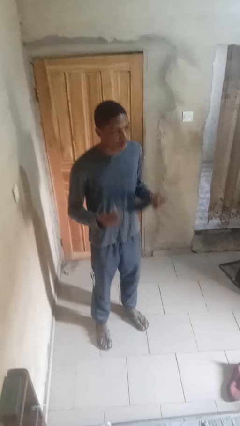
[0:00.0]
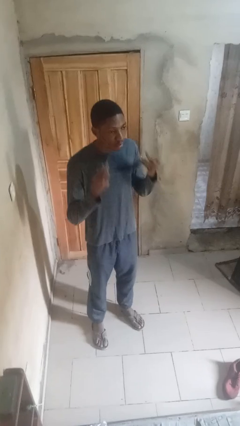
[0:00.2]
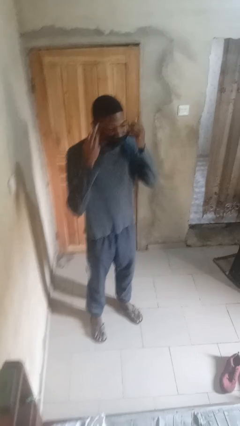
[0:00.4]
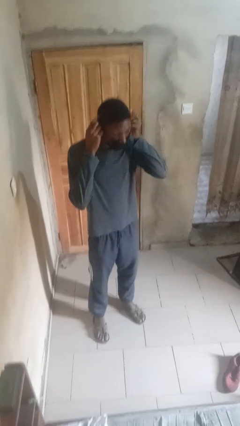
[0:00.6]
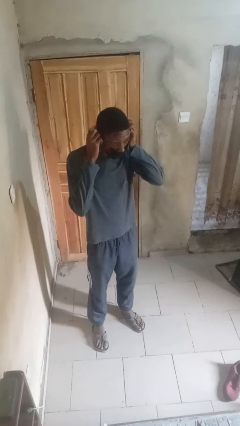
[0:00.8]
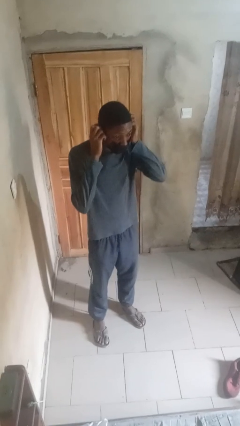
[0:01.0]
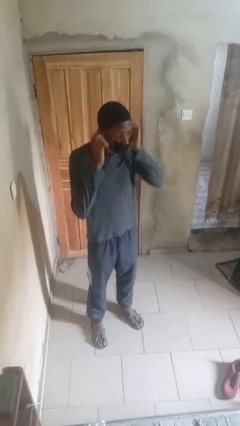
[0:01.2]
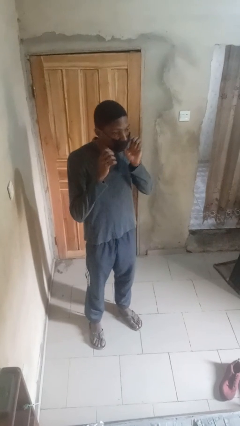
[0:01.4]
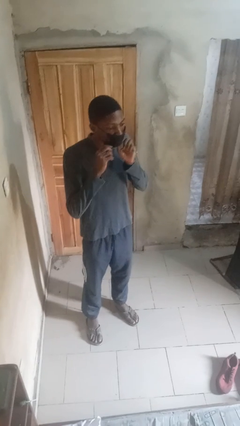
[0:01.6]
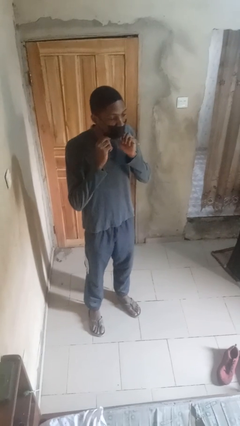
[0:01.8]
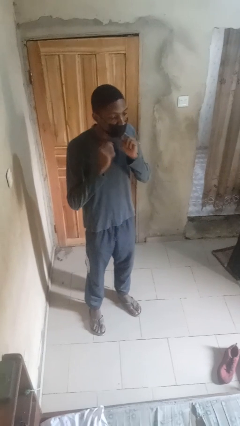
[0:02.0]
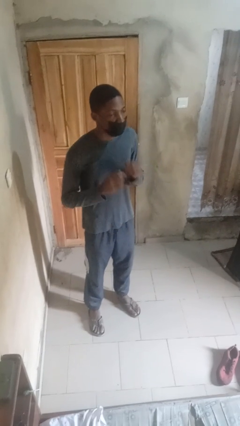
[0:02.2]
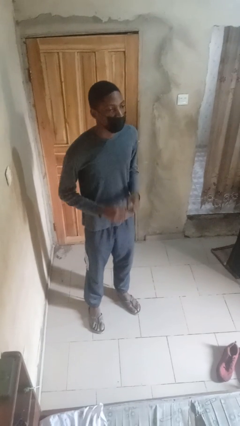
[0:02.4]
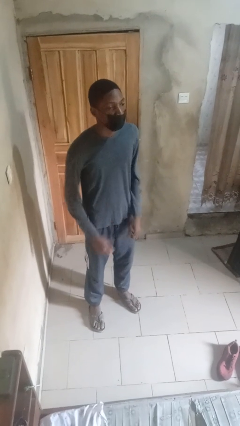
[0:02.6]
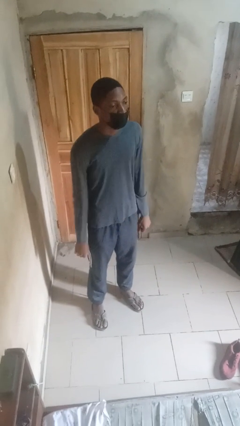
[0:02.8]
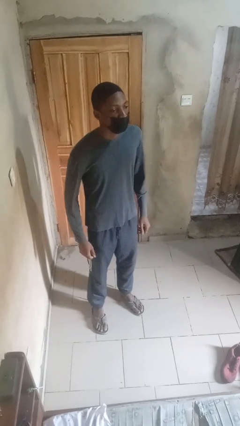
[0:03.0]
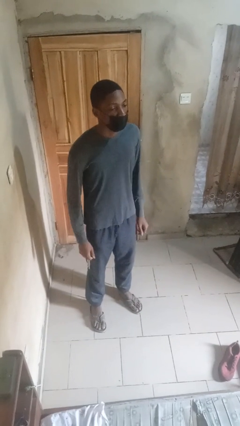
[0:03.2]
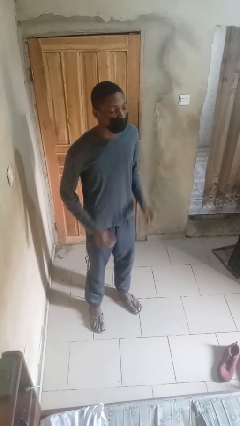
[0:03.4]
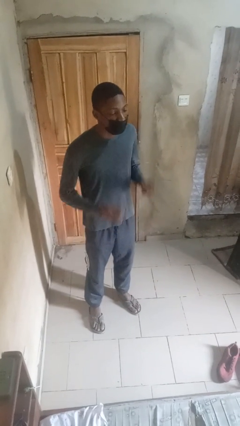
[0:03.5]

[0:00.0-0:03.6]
person puts on facemask

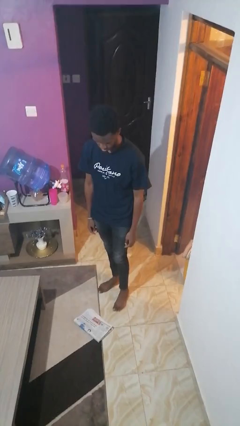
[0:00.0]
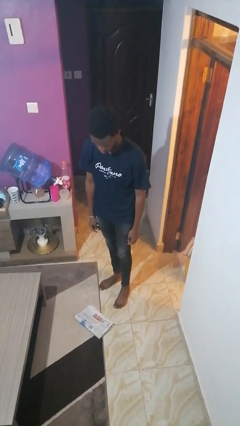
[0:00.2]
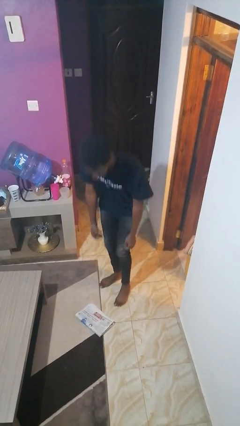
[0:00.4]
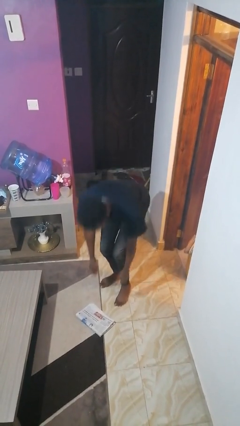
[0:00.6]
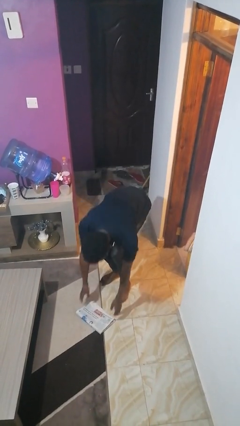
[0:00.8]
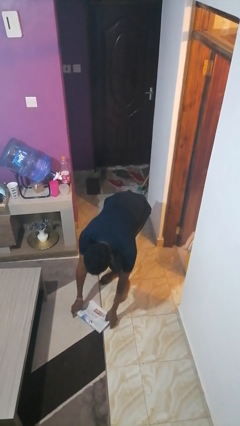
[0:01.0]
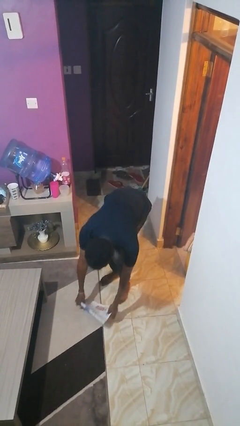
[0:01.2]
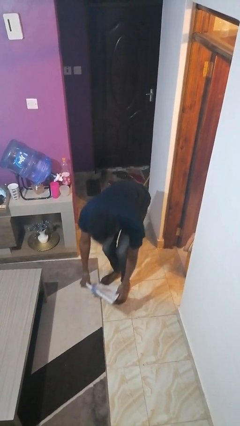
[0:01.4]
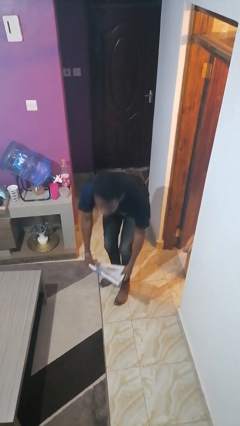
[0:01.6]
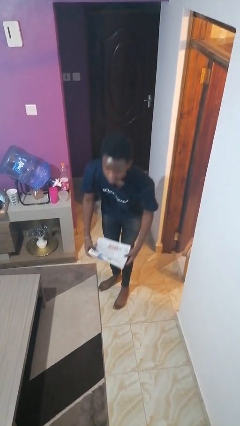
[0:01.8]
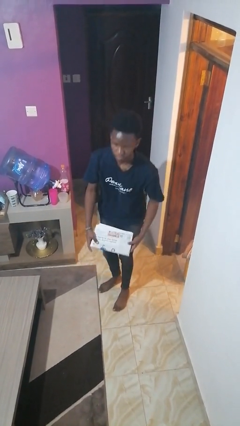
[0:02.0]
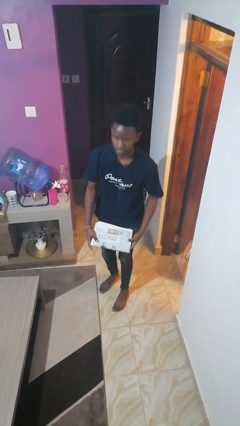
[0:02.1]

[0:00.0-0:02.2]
person picks up object from floor

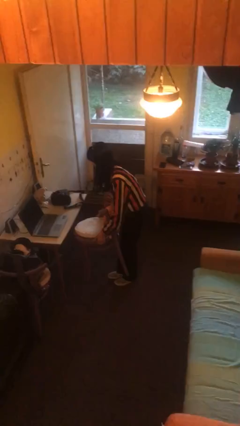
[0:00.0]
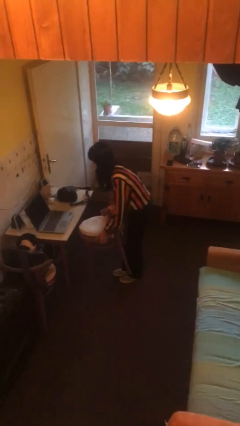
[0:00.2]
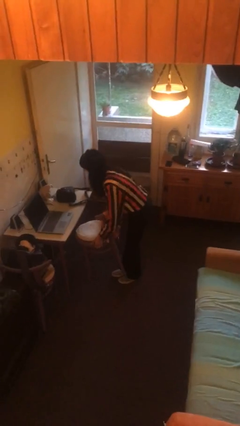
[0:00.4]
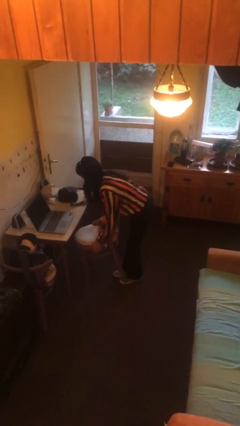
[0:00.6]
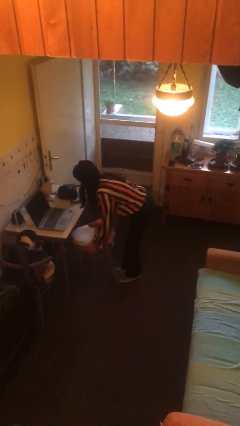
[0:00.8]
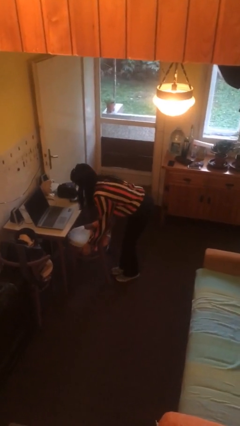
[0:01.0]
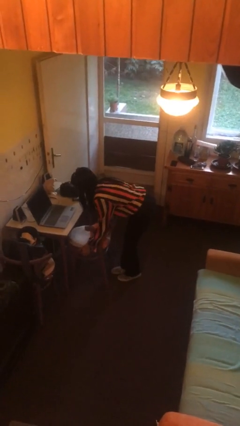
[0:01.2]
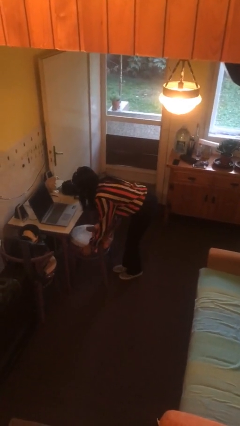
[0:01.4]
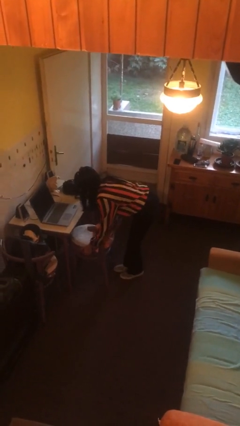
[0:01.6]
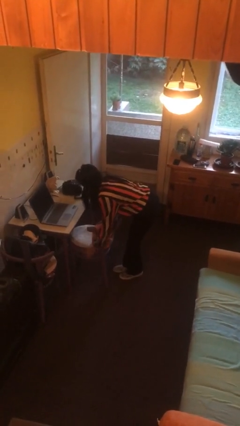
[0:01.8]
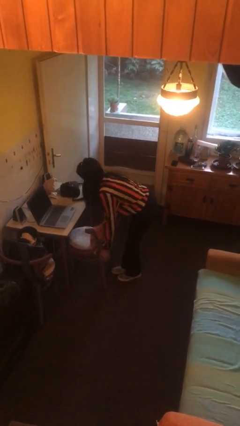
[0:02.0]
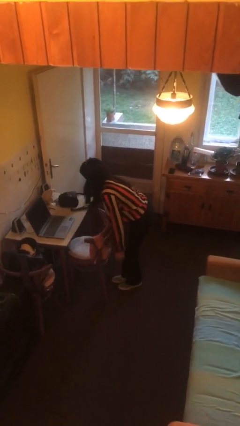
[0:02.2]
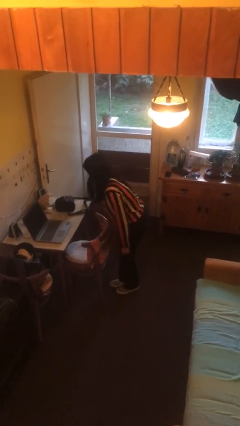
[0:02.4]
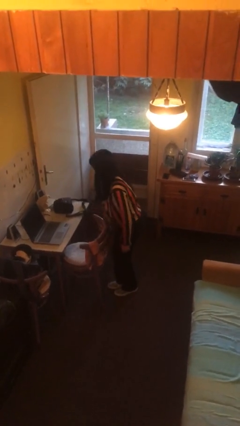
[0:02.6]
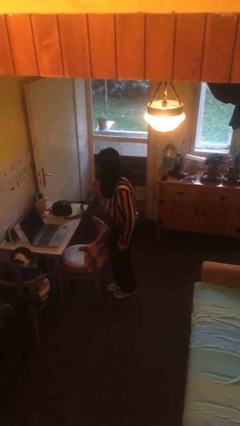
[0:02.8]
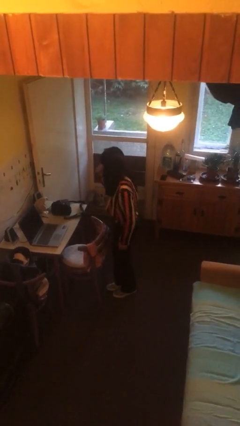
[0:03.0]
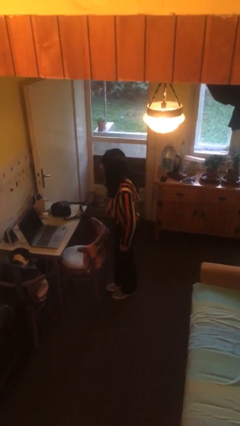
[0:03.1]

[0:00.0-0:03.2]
person puts down object on floor

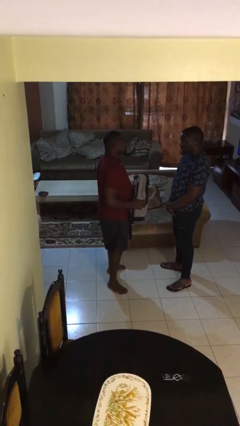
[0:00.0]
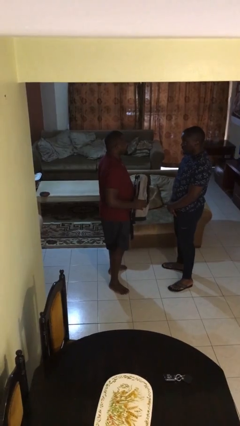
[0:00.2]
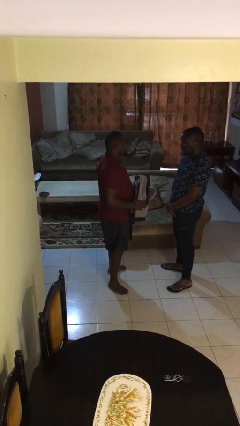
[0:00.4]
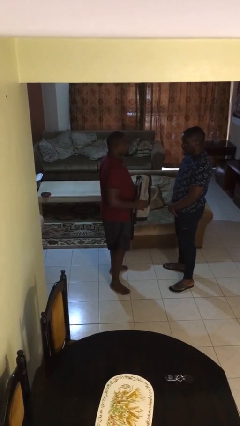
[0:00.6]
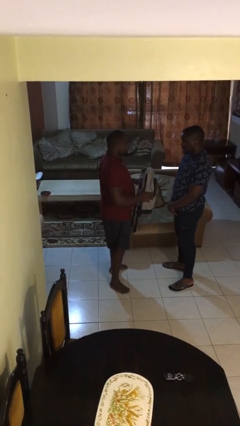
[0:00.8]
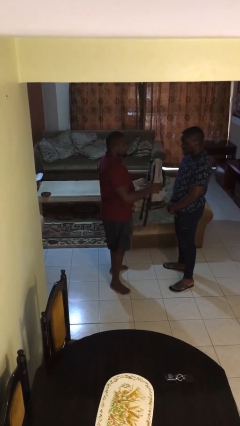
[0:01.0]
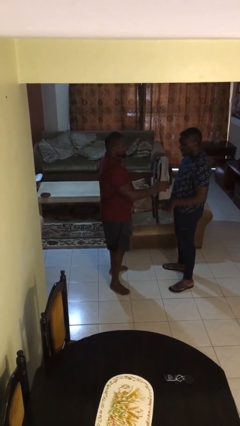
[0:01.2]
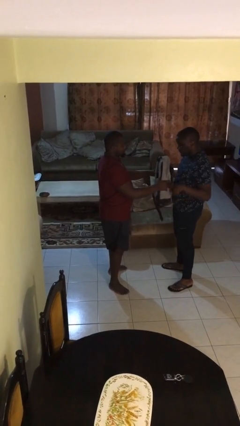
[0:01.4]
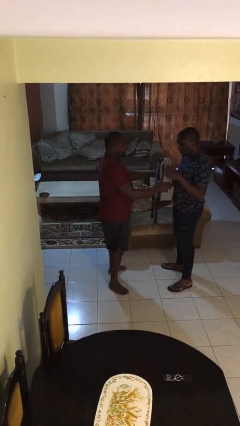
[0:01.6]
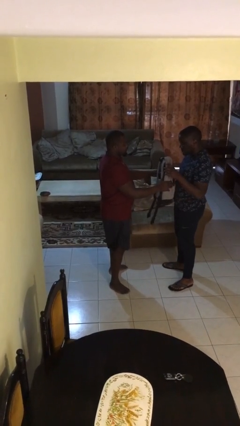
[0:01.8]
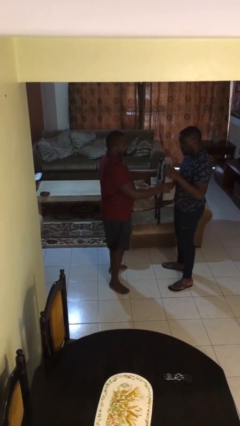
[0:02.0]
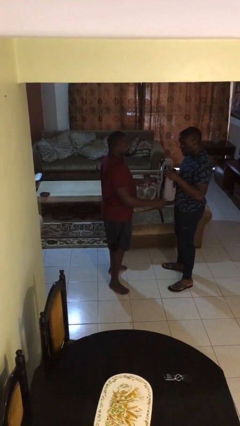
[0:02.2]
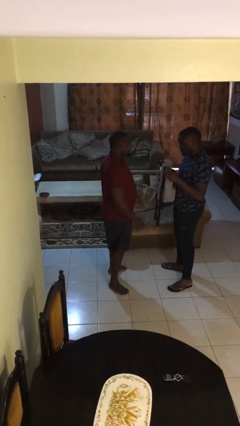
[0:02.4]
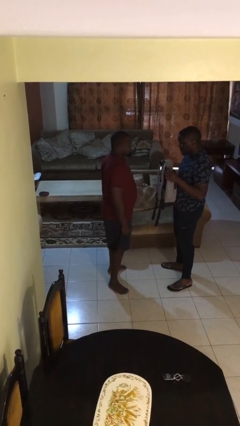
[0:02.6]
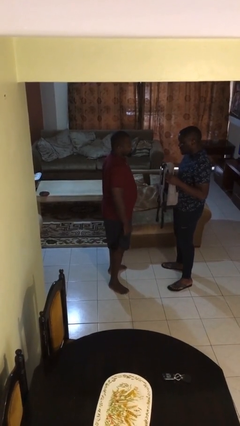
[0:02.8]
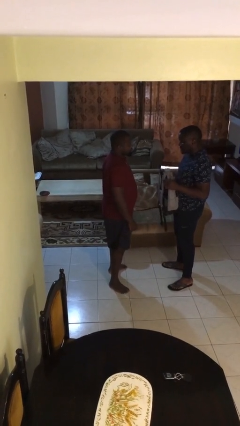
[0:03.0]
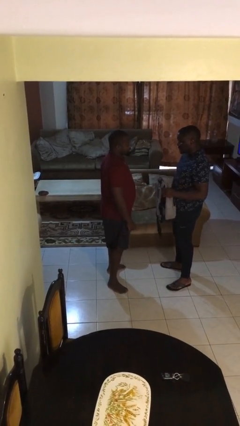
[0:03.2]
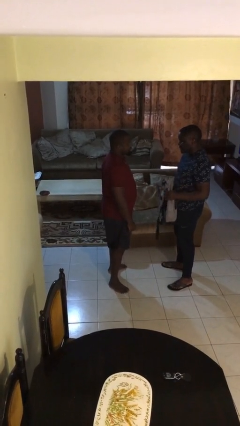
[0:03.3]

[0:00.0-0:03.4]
person transfers object to person

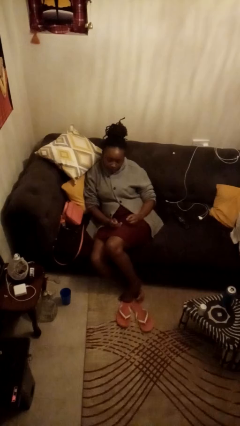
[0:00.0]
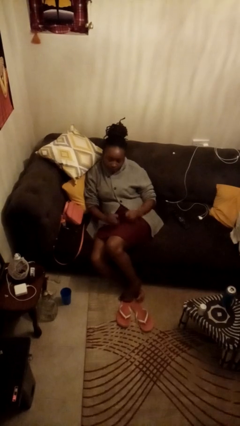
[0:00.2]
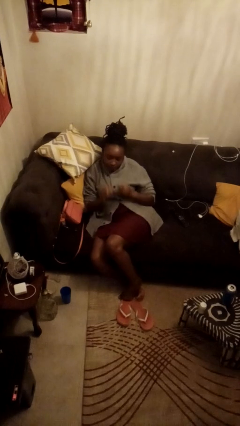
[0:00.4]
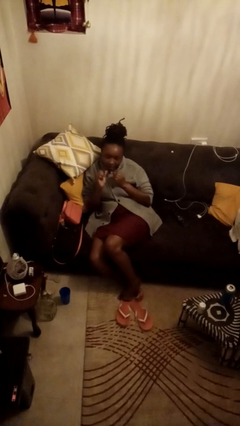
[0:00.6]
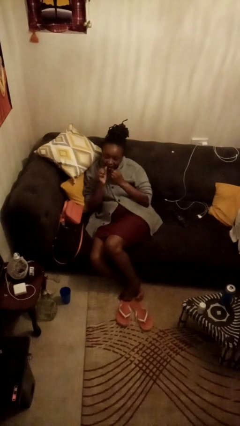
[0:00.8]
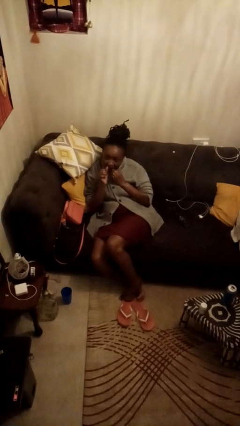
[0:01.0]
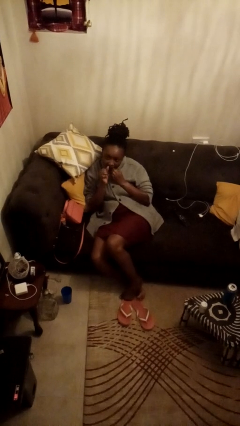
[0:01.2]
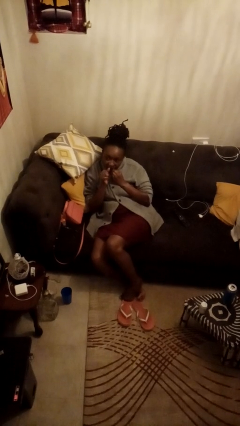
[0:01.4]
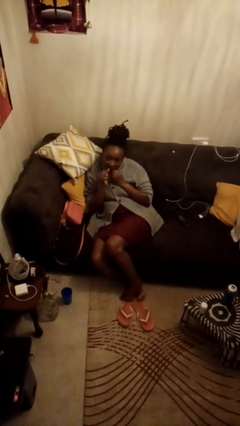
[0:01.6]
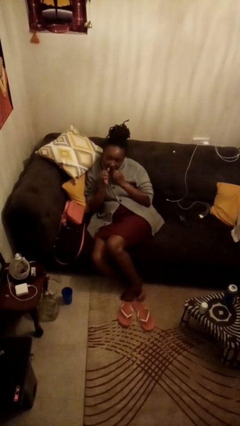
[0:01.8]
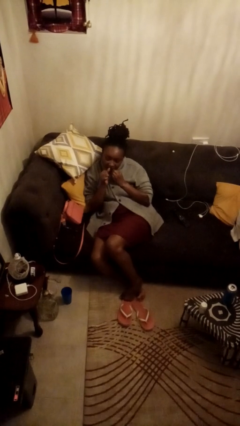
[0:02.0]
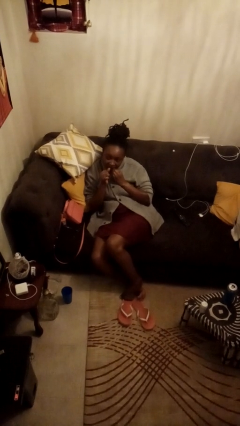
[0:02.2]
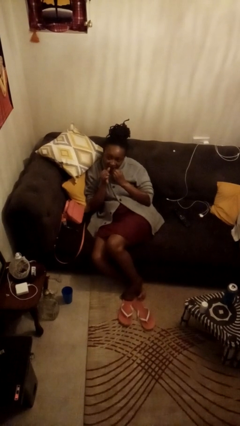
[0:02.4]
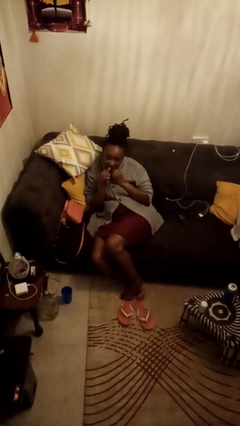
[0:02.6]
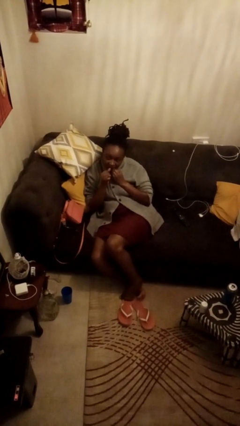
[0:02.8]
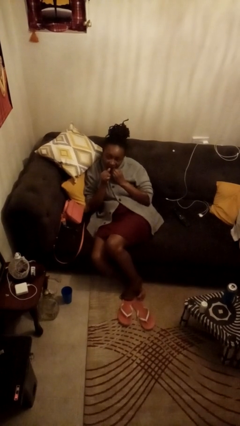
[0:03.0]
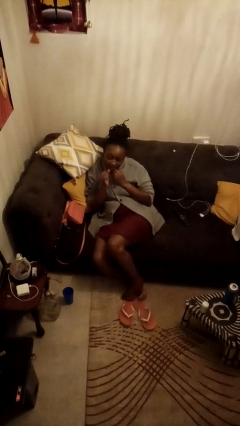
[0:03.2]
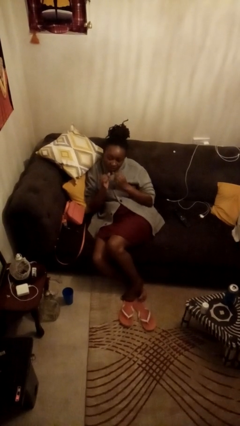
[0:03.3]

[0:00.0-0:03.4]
person flosses

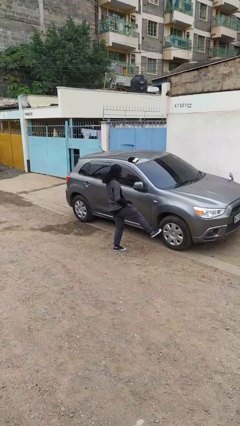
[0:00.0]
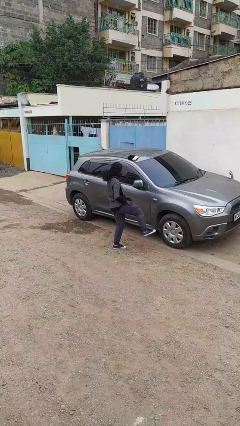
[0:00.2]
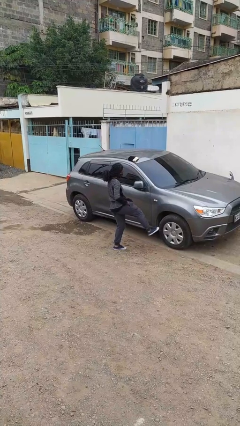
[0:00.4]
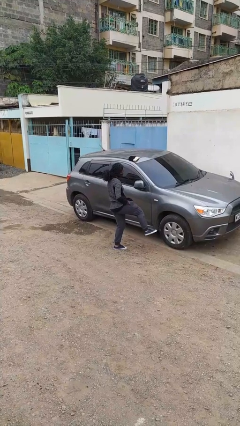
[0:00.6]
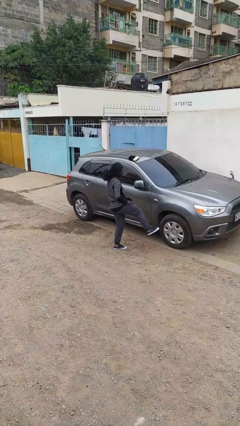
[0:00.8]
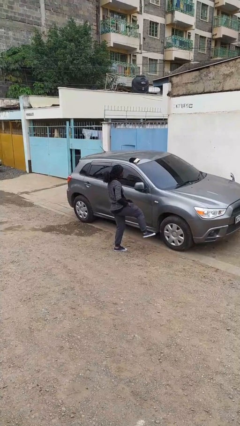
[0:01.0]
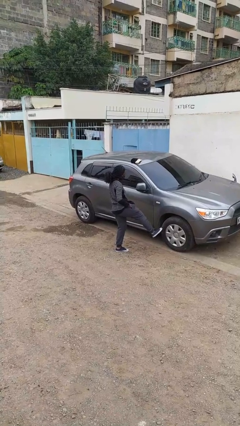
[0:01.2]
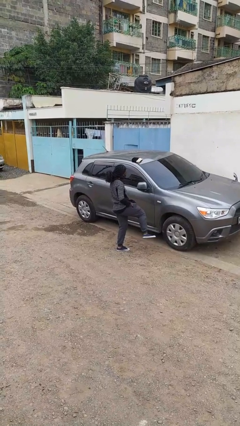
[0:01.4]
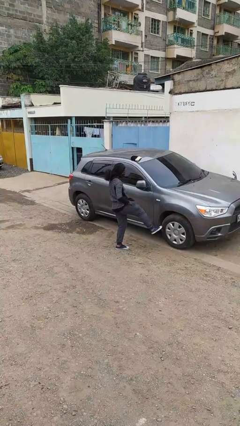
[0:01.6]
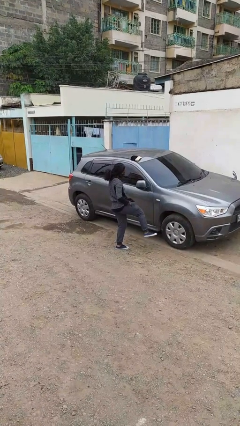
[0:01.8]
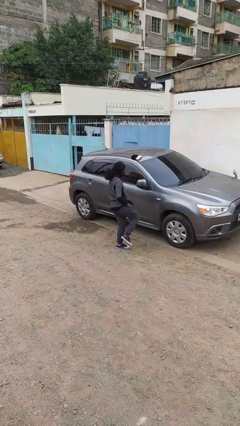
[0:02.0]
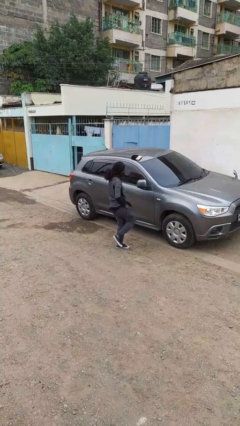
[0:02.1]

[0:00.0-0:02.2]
person kicks car tires
